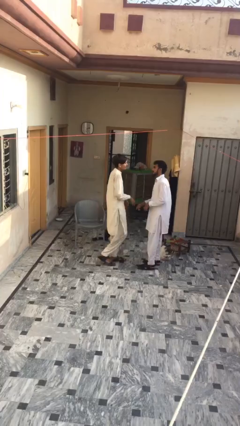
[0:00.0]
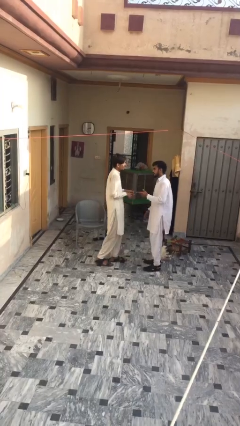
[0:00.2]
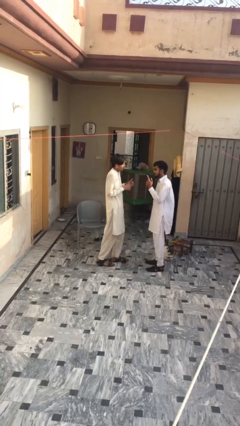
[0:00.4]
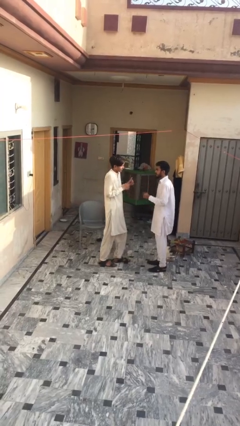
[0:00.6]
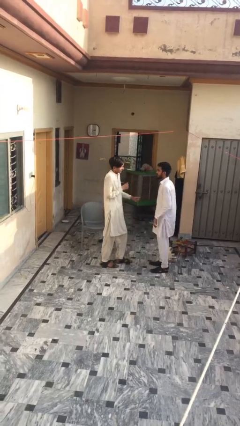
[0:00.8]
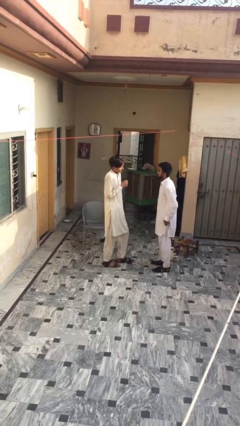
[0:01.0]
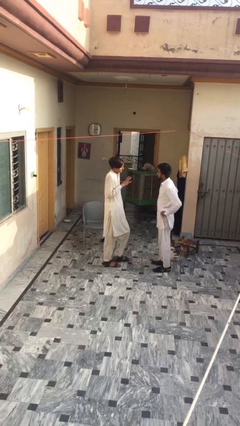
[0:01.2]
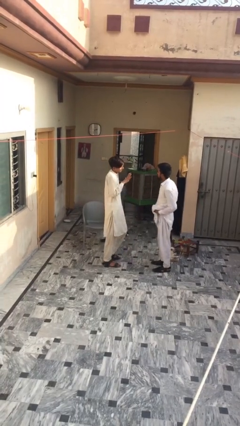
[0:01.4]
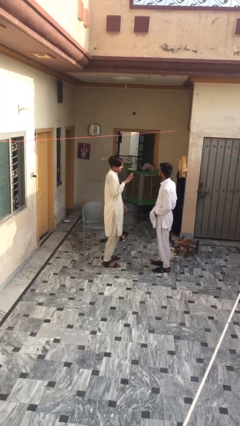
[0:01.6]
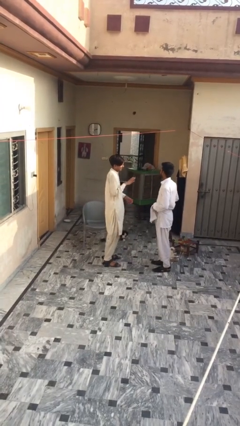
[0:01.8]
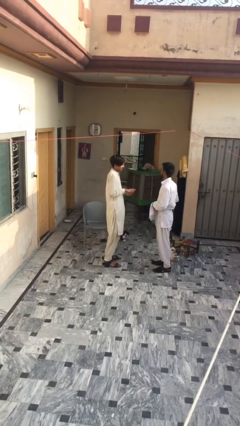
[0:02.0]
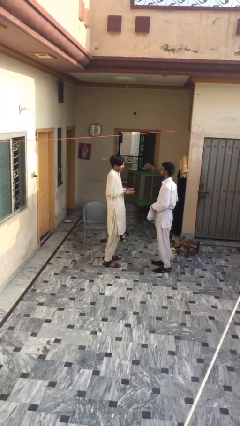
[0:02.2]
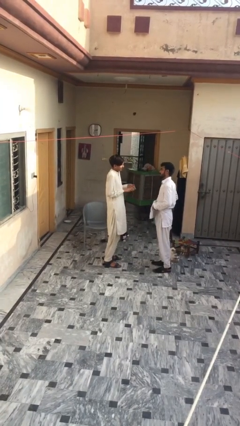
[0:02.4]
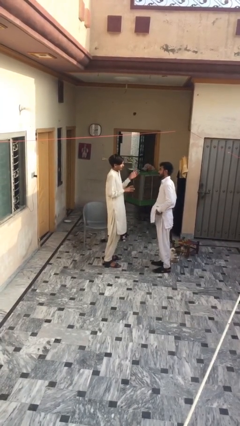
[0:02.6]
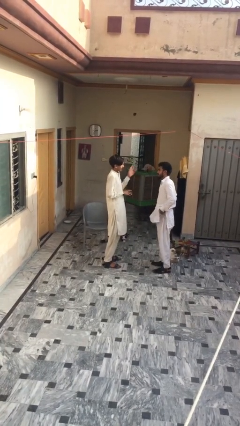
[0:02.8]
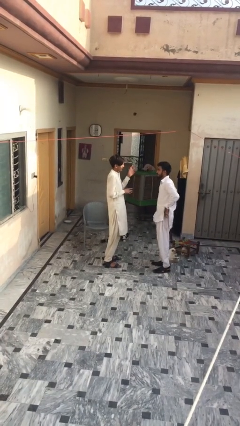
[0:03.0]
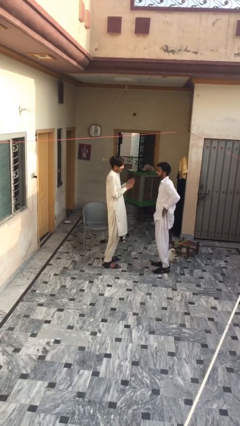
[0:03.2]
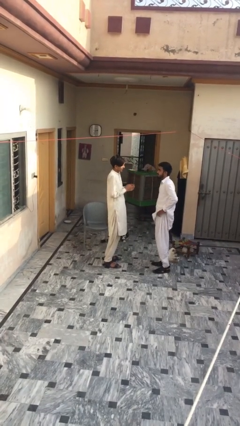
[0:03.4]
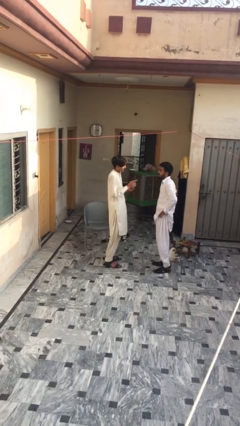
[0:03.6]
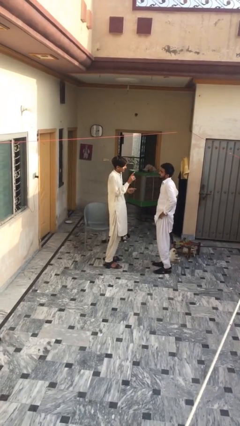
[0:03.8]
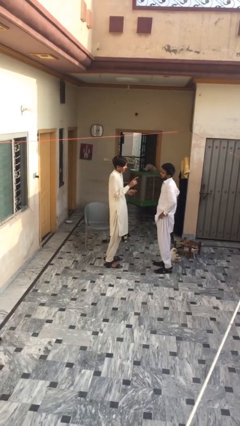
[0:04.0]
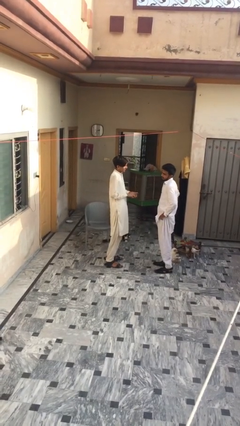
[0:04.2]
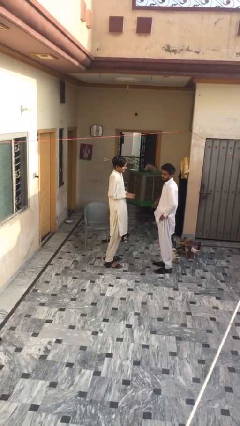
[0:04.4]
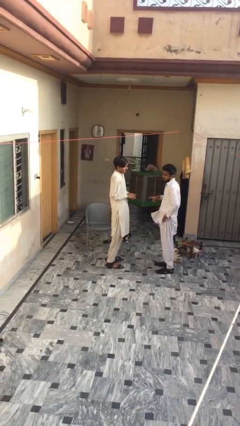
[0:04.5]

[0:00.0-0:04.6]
person talks to person

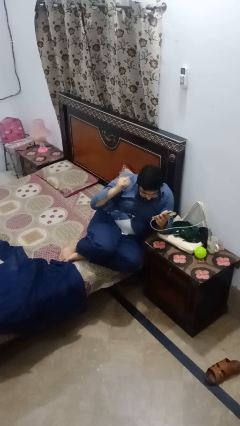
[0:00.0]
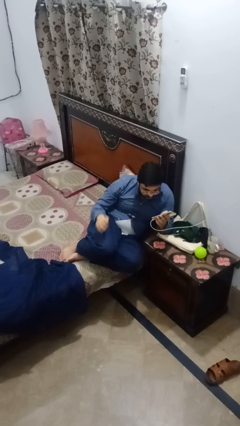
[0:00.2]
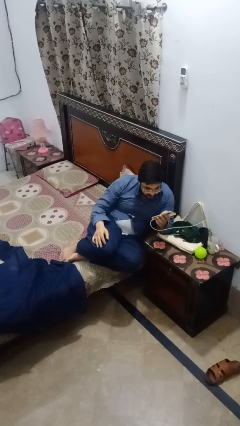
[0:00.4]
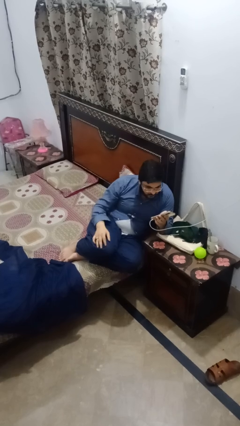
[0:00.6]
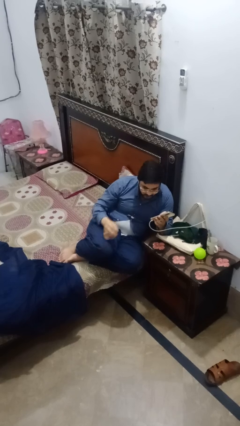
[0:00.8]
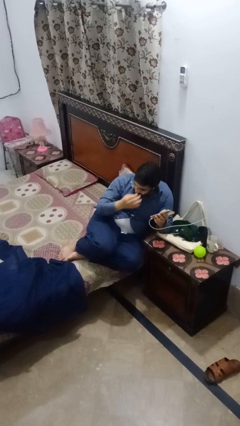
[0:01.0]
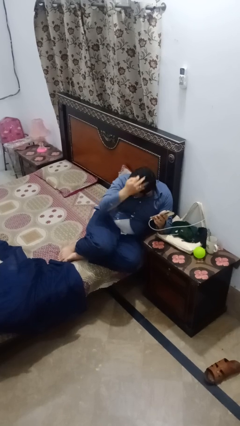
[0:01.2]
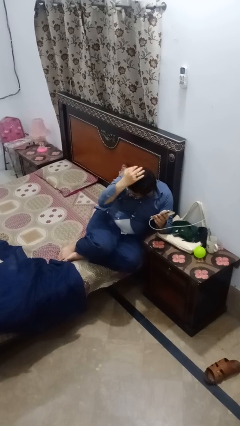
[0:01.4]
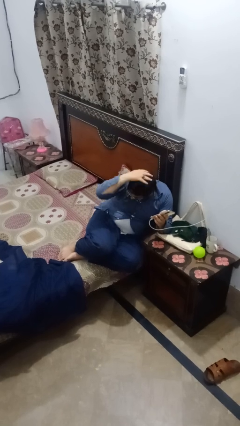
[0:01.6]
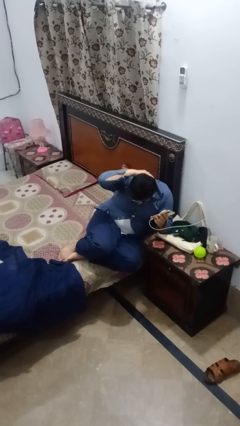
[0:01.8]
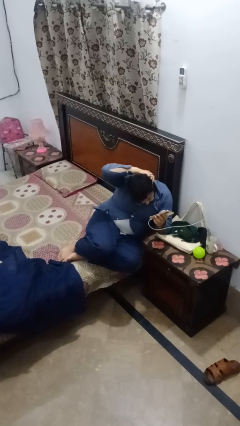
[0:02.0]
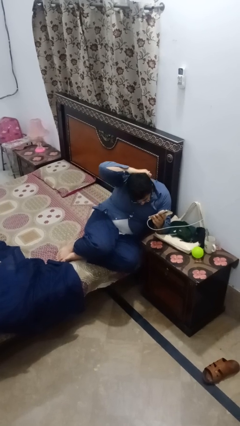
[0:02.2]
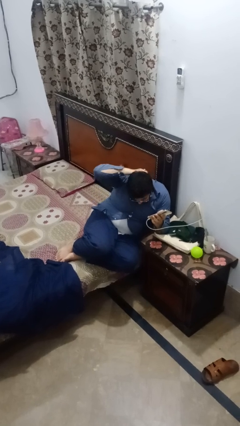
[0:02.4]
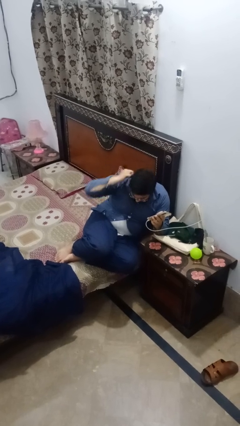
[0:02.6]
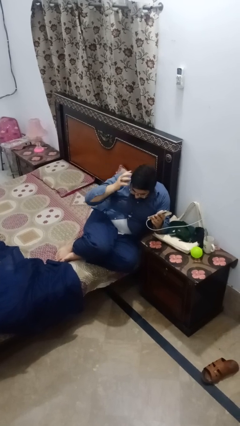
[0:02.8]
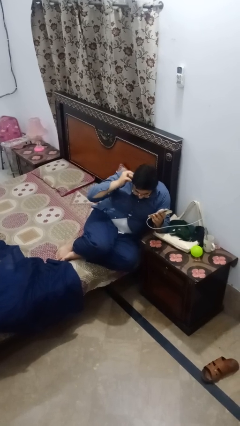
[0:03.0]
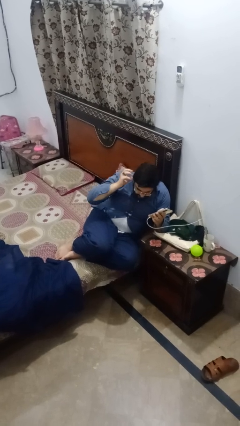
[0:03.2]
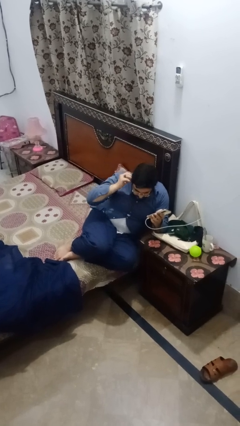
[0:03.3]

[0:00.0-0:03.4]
person strokes hair

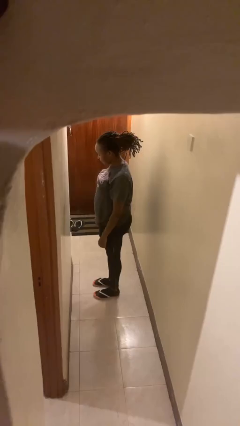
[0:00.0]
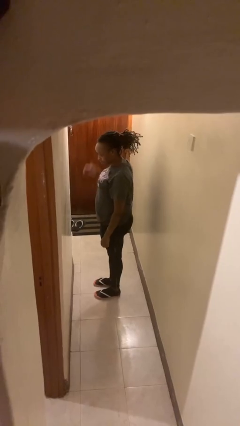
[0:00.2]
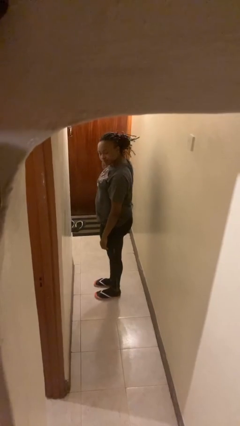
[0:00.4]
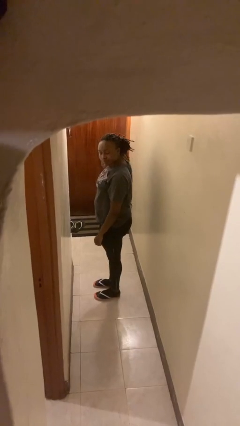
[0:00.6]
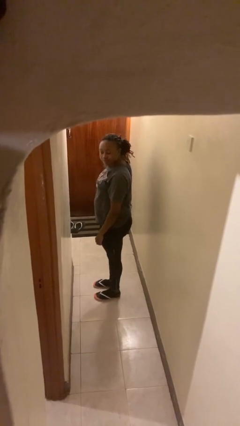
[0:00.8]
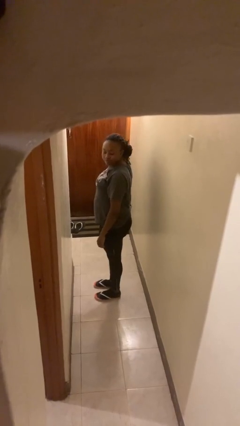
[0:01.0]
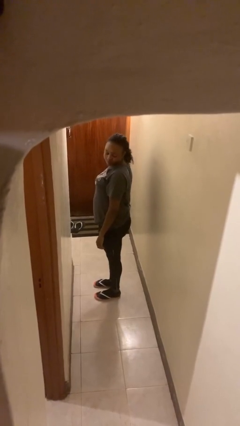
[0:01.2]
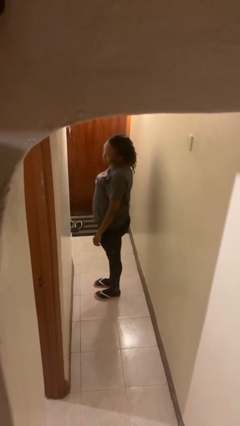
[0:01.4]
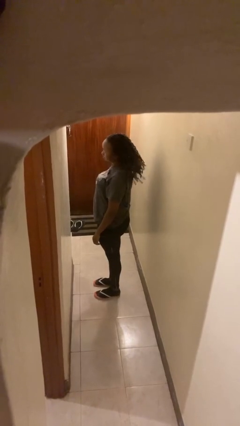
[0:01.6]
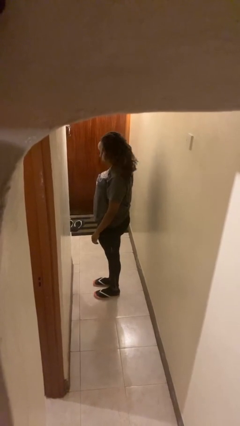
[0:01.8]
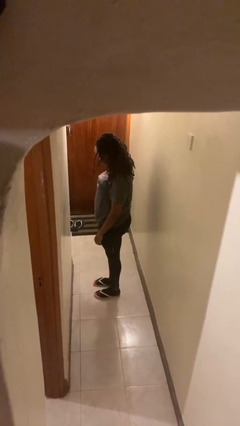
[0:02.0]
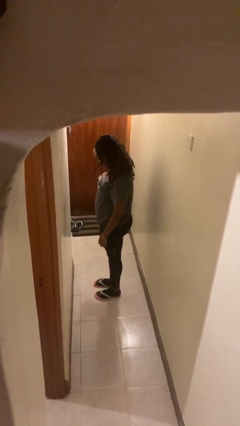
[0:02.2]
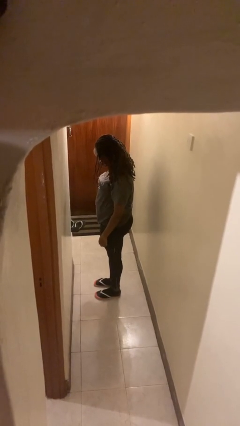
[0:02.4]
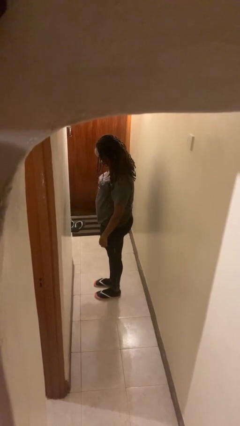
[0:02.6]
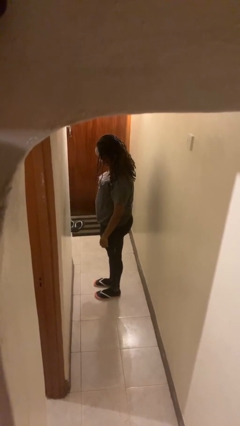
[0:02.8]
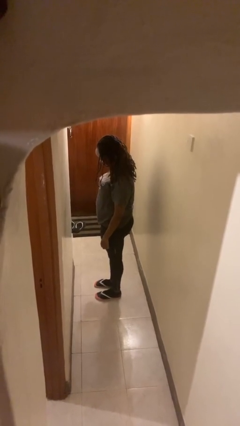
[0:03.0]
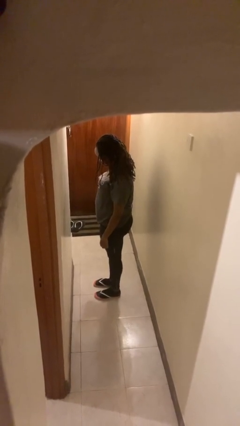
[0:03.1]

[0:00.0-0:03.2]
person takes off hairtie

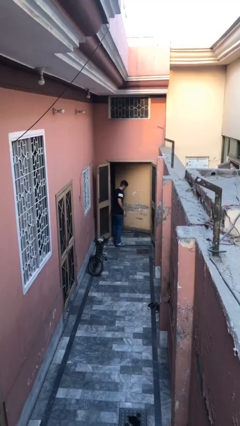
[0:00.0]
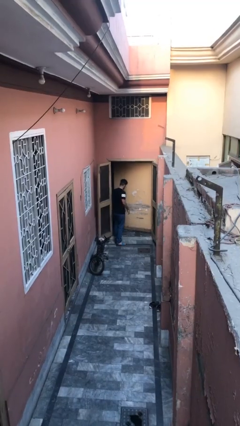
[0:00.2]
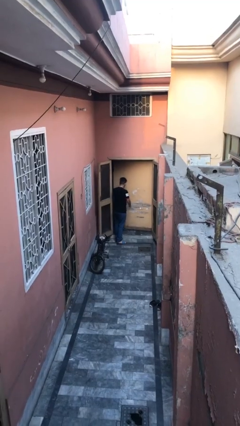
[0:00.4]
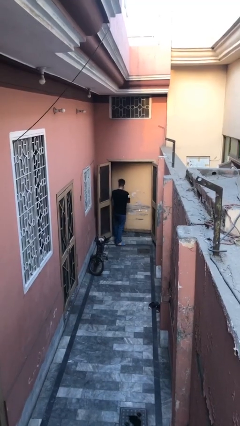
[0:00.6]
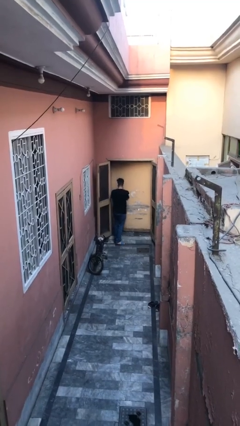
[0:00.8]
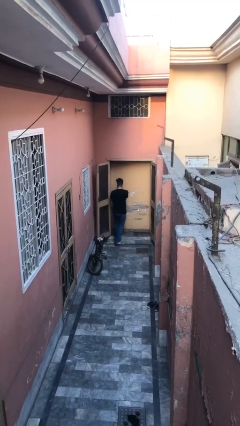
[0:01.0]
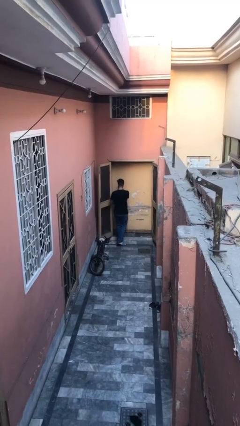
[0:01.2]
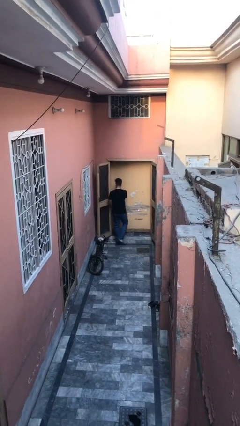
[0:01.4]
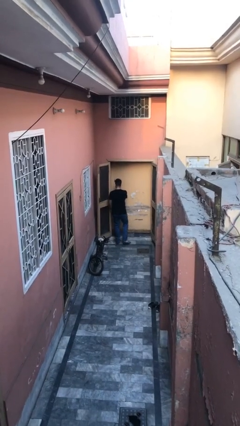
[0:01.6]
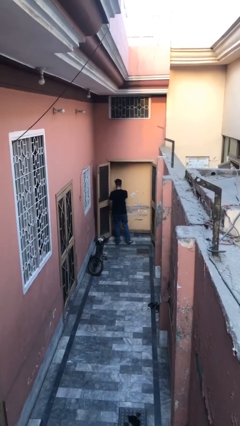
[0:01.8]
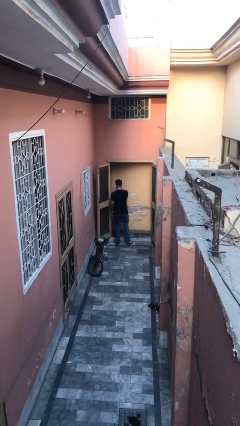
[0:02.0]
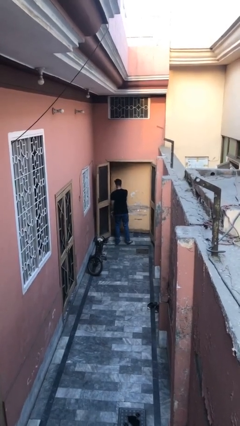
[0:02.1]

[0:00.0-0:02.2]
person closes facility door

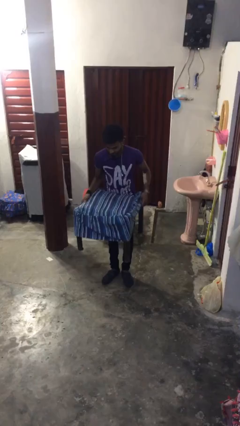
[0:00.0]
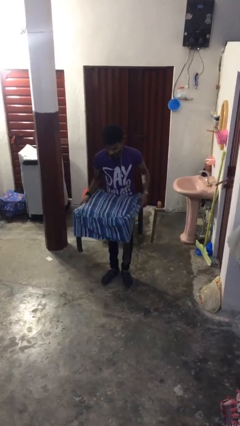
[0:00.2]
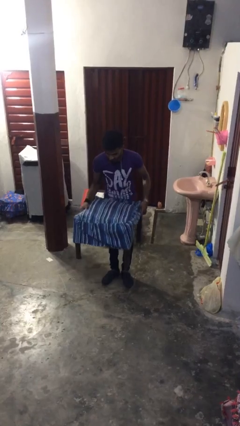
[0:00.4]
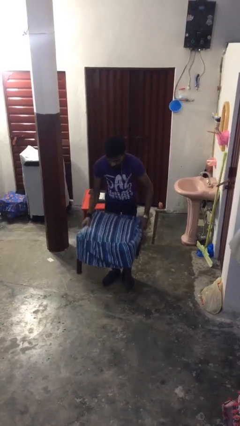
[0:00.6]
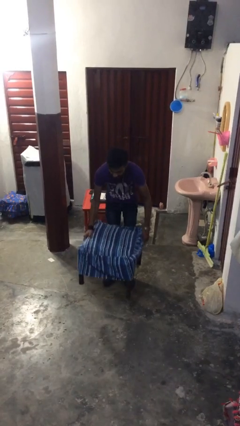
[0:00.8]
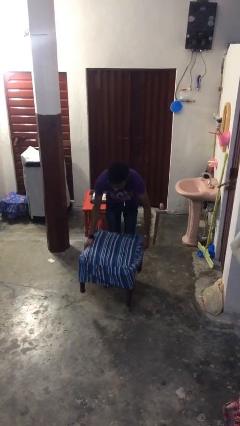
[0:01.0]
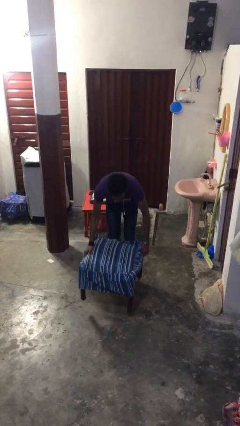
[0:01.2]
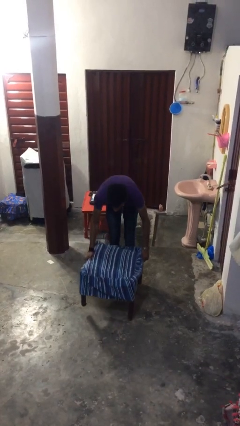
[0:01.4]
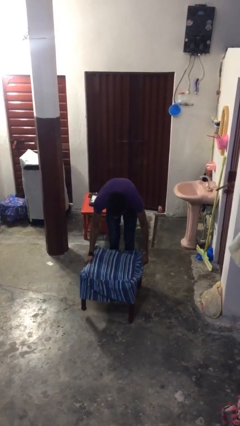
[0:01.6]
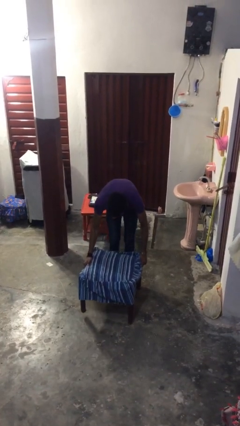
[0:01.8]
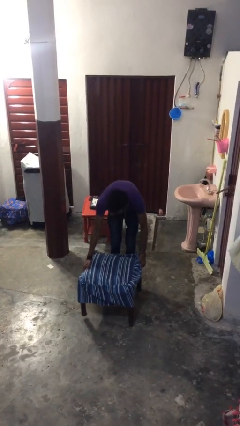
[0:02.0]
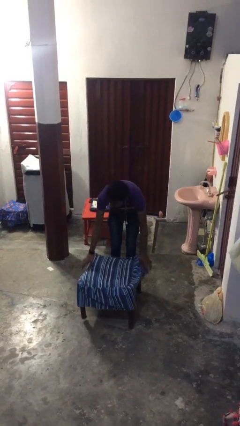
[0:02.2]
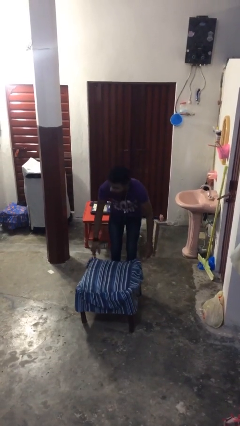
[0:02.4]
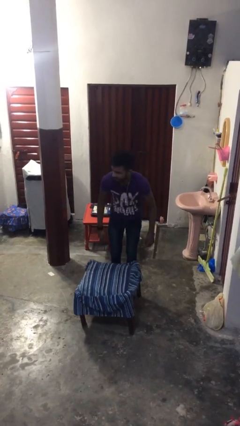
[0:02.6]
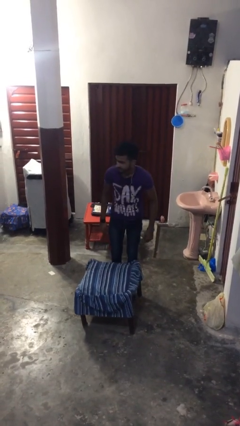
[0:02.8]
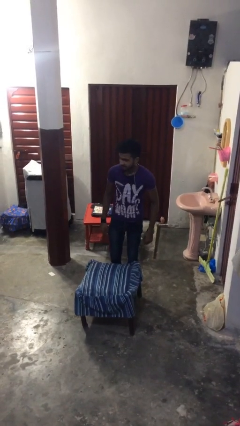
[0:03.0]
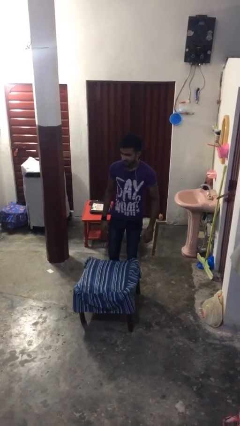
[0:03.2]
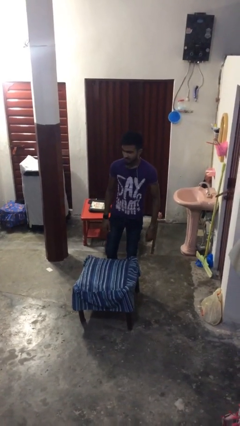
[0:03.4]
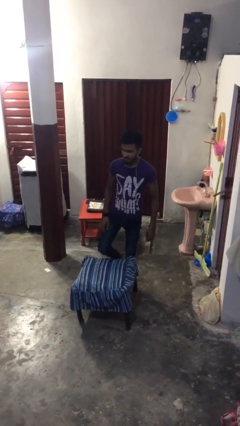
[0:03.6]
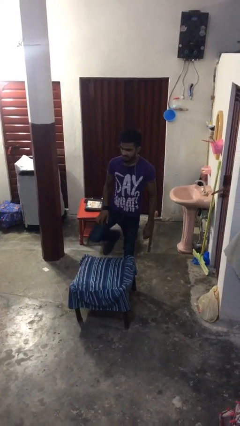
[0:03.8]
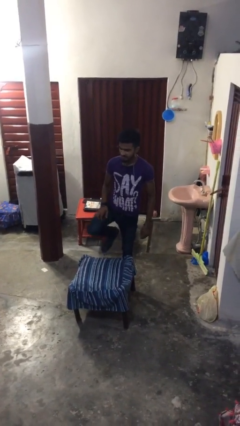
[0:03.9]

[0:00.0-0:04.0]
person puts down object on floor

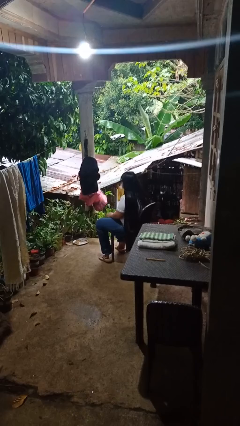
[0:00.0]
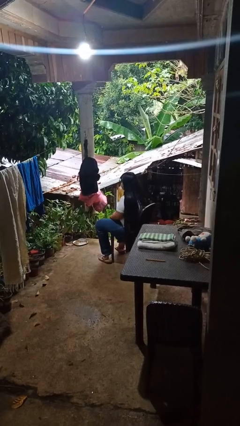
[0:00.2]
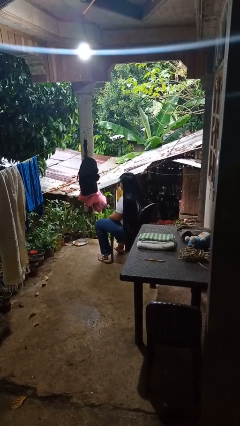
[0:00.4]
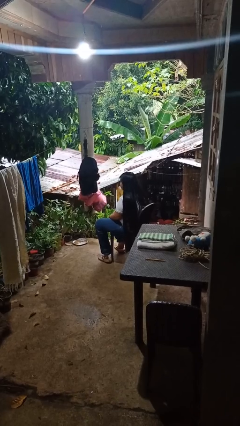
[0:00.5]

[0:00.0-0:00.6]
person swats bug
